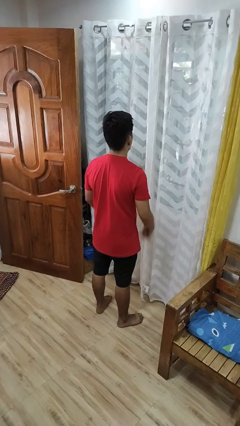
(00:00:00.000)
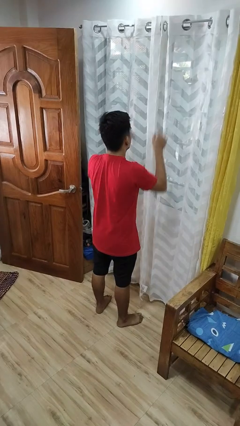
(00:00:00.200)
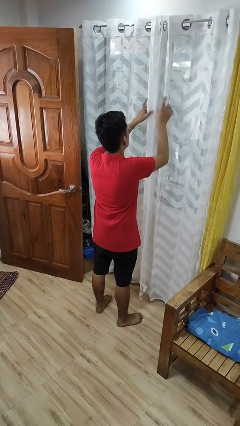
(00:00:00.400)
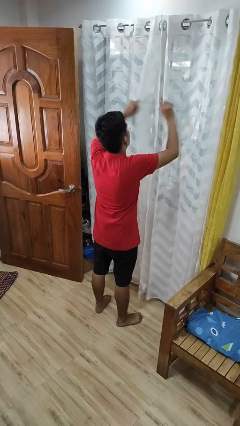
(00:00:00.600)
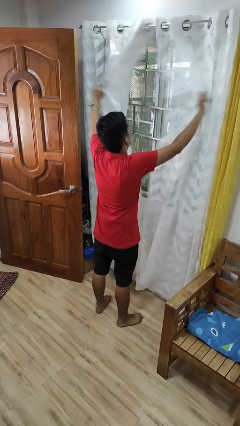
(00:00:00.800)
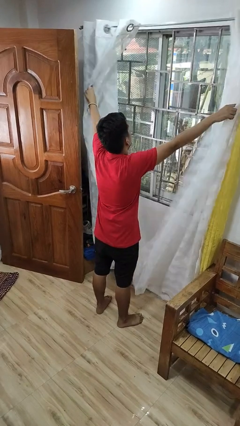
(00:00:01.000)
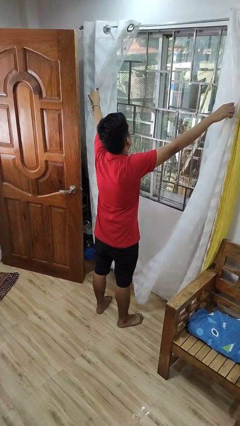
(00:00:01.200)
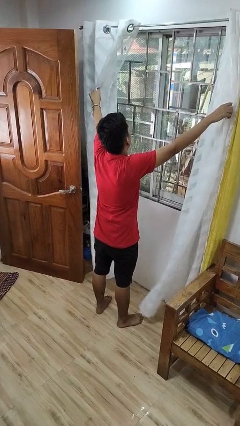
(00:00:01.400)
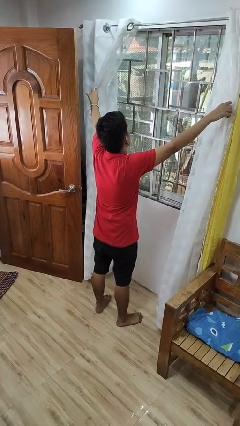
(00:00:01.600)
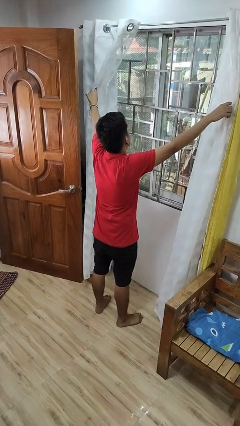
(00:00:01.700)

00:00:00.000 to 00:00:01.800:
person opens curtains

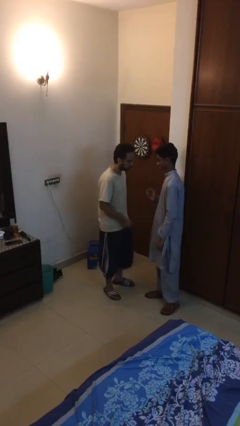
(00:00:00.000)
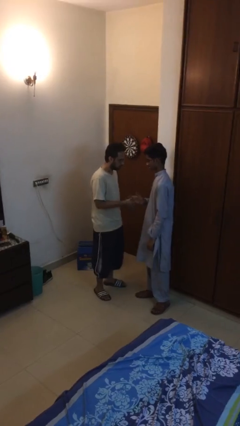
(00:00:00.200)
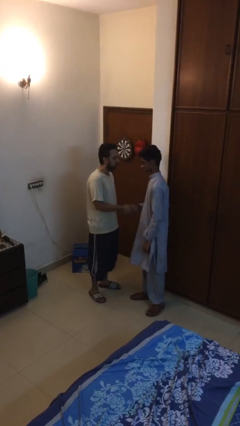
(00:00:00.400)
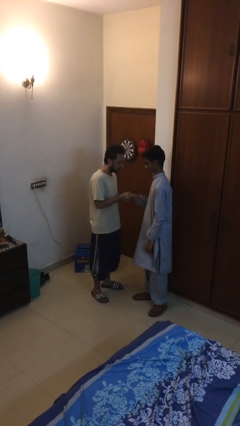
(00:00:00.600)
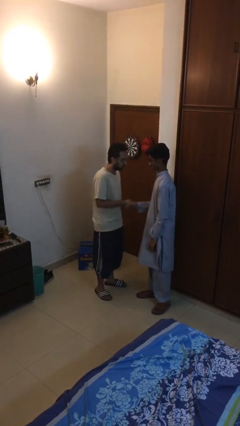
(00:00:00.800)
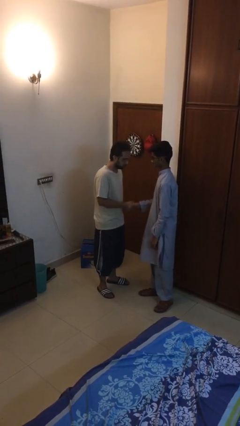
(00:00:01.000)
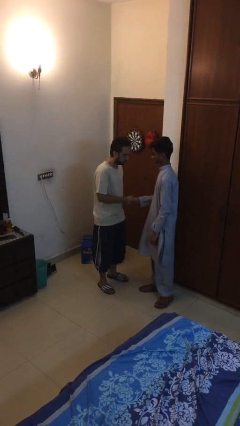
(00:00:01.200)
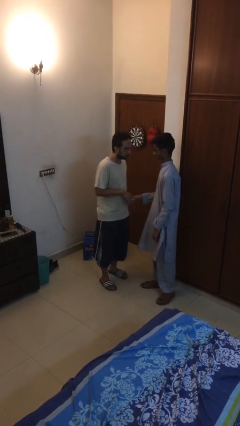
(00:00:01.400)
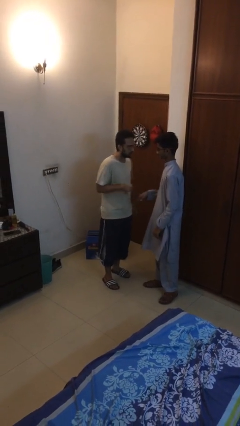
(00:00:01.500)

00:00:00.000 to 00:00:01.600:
person shakes hand

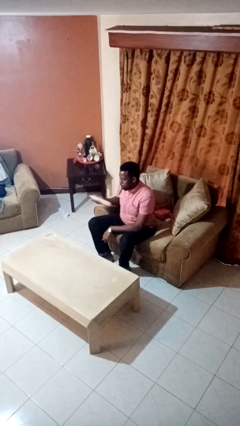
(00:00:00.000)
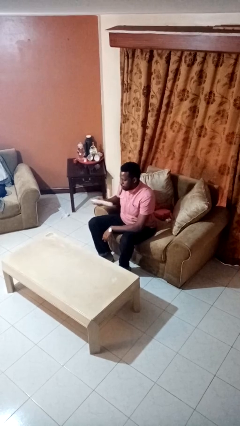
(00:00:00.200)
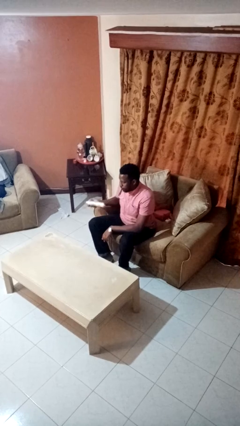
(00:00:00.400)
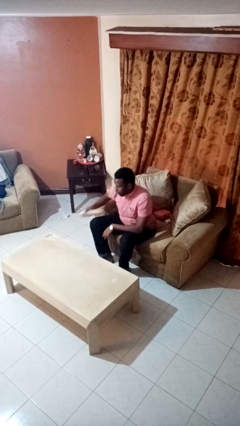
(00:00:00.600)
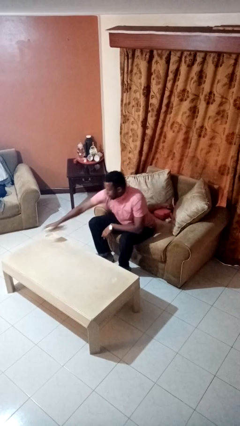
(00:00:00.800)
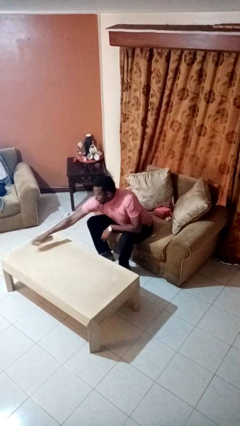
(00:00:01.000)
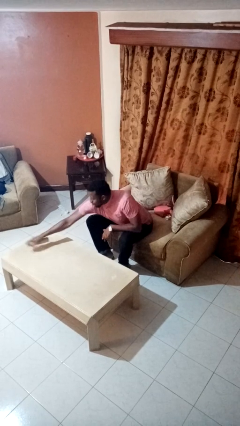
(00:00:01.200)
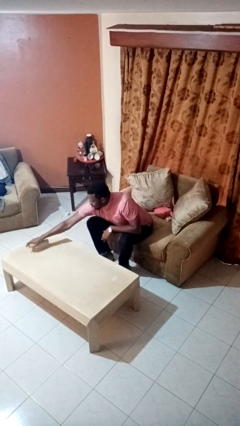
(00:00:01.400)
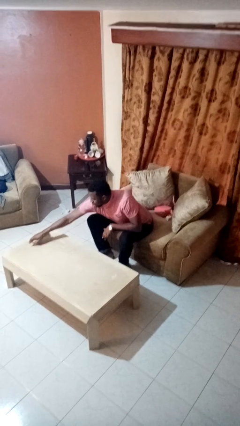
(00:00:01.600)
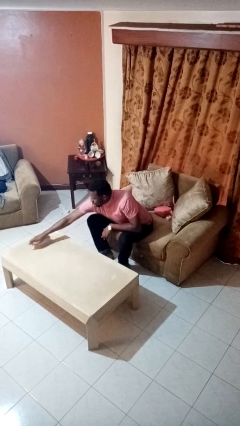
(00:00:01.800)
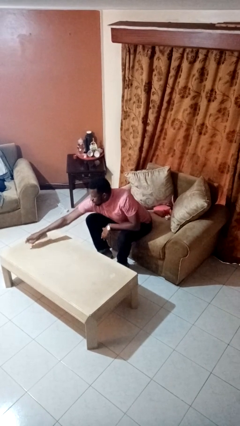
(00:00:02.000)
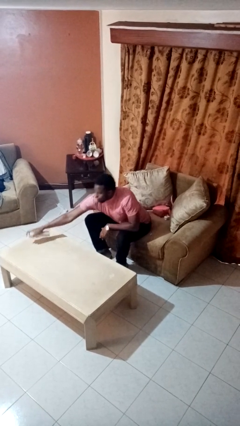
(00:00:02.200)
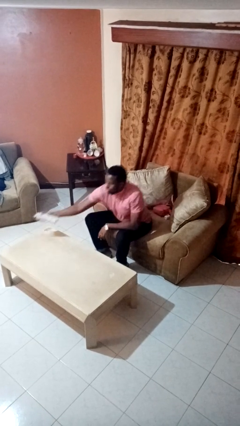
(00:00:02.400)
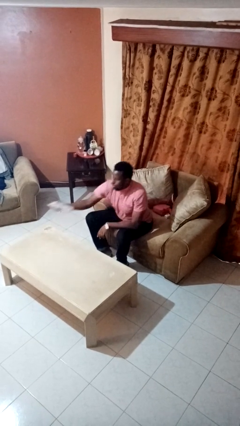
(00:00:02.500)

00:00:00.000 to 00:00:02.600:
person sprays from bottle

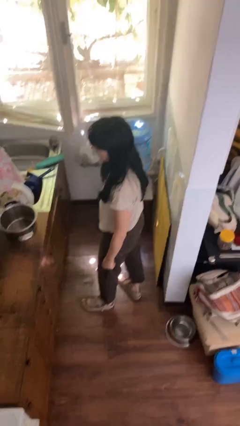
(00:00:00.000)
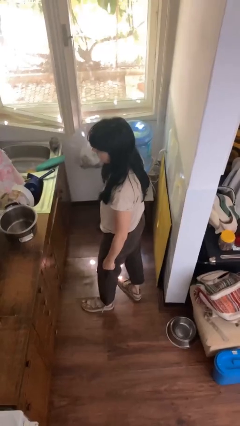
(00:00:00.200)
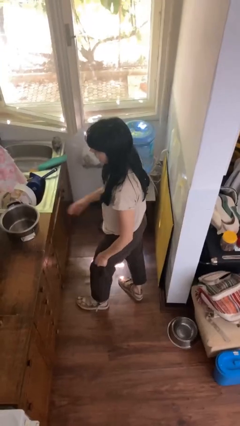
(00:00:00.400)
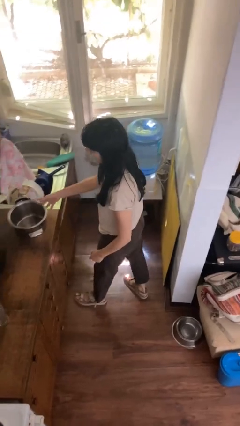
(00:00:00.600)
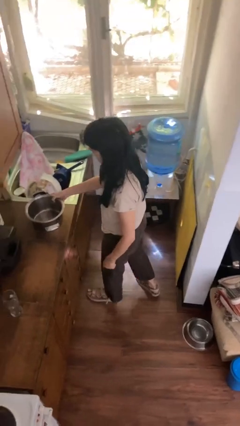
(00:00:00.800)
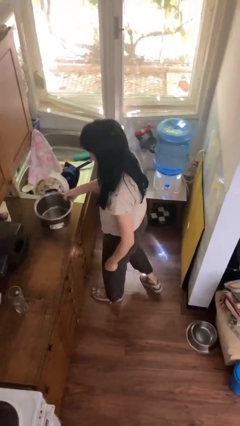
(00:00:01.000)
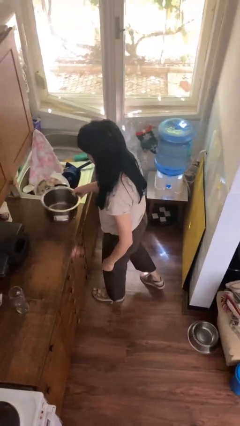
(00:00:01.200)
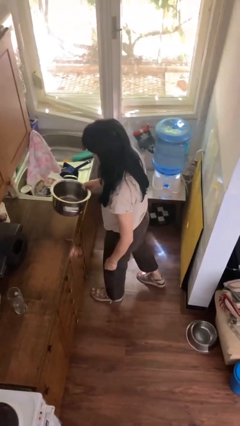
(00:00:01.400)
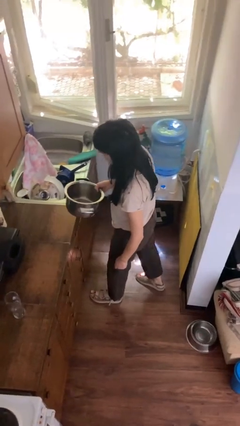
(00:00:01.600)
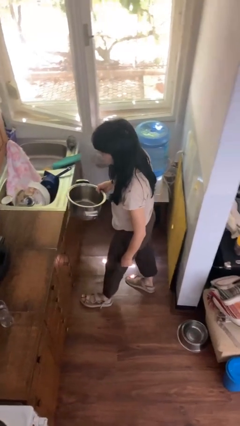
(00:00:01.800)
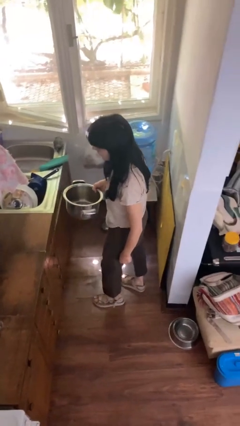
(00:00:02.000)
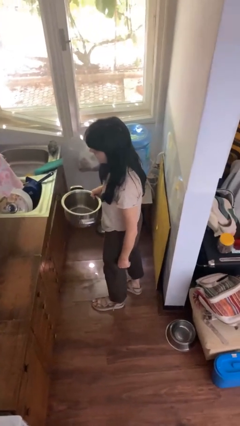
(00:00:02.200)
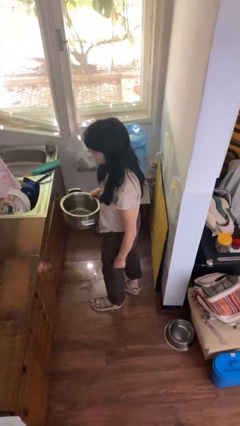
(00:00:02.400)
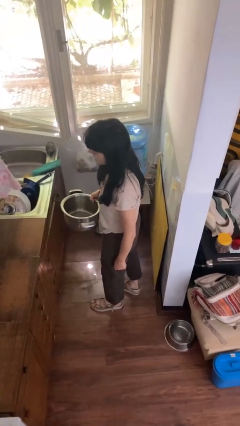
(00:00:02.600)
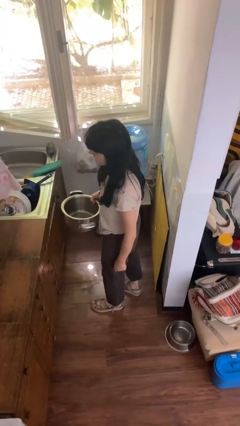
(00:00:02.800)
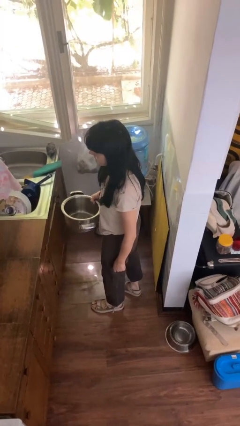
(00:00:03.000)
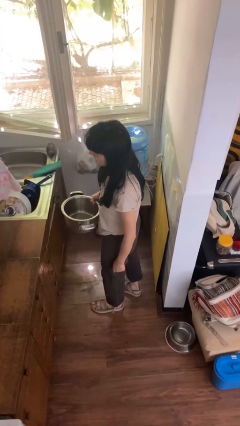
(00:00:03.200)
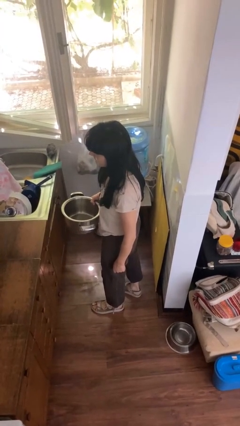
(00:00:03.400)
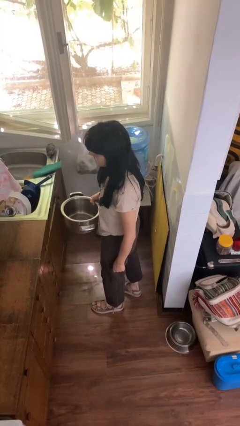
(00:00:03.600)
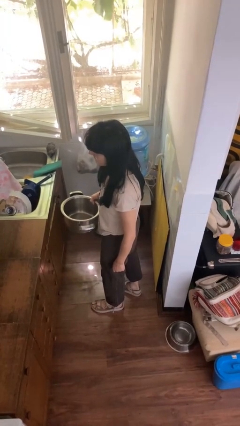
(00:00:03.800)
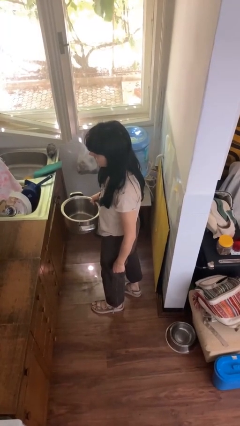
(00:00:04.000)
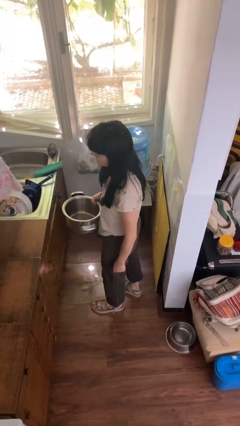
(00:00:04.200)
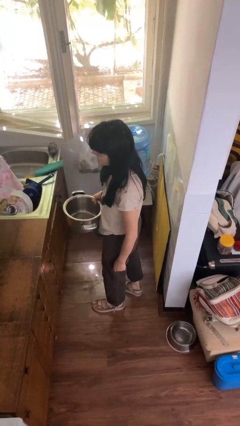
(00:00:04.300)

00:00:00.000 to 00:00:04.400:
person picks up object from countertop

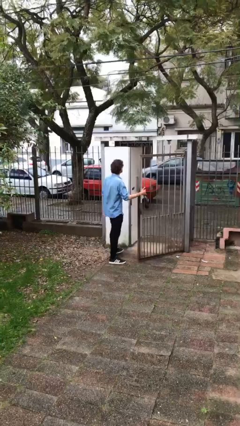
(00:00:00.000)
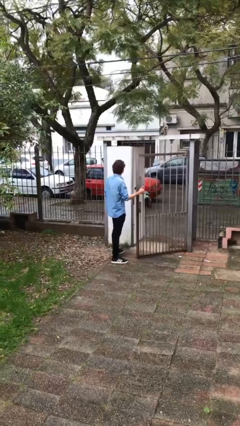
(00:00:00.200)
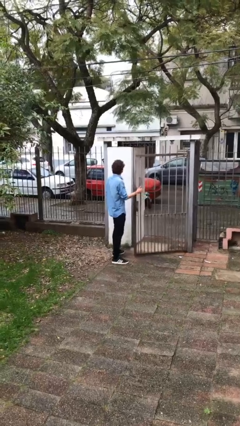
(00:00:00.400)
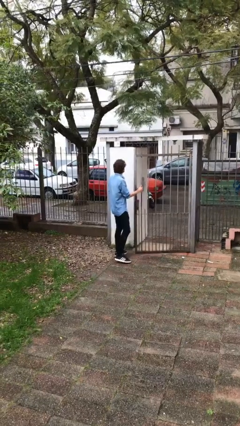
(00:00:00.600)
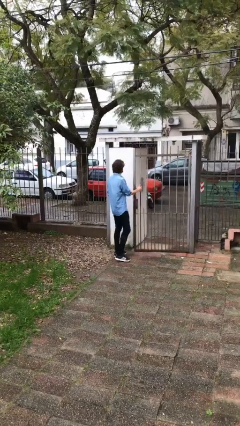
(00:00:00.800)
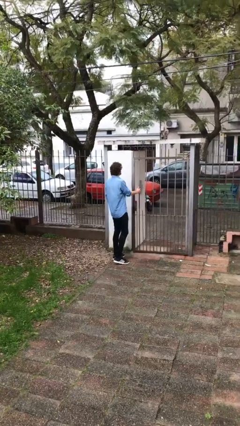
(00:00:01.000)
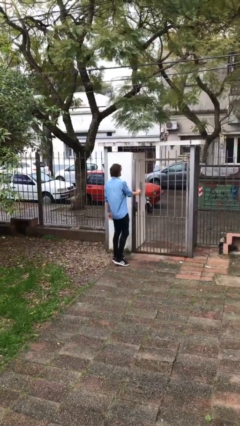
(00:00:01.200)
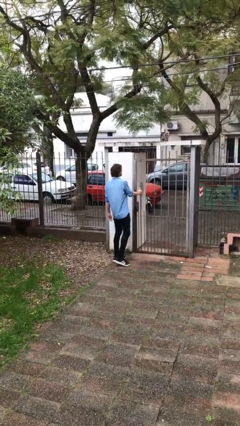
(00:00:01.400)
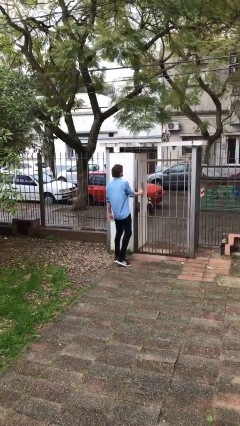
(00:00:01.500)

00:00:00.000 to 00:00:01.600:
person closes facility door

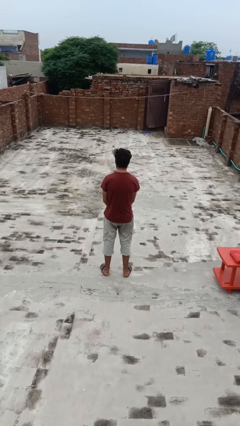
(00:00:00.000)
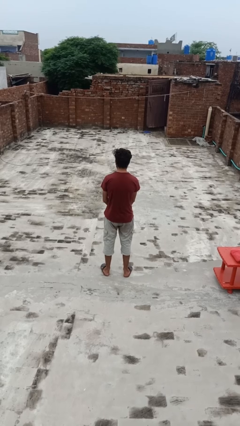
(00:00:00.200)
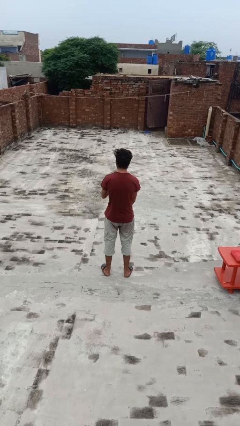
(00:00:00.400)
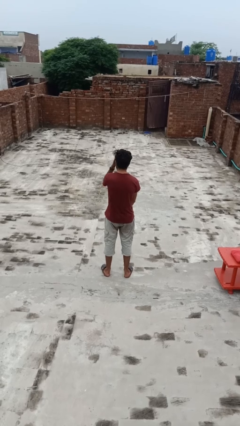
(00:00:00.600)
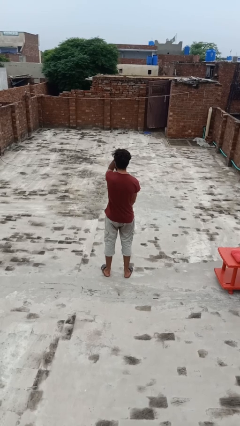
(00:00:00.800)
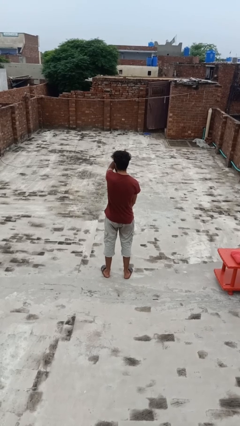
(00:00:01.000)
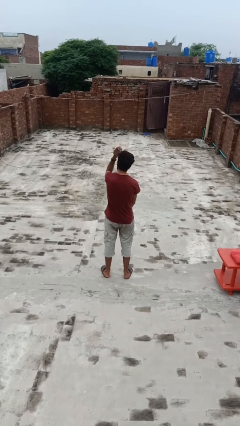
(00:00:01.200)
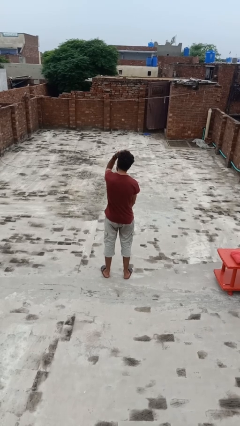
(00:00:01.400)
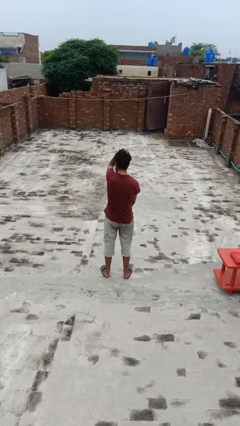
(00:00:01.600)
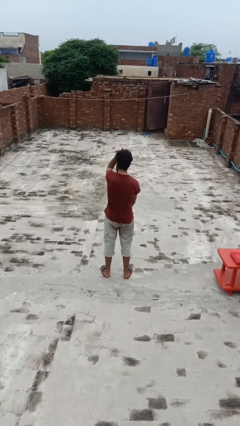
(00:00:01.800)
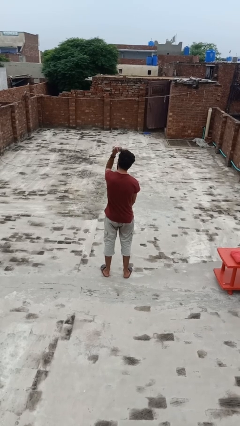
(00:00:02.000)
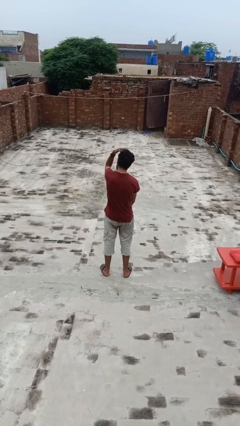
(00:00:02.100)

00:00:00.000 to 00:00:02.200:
person strokes hair

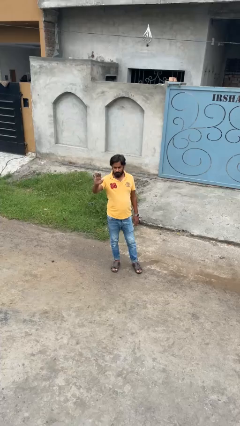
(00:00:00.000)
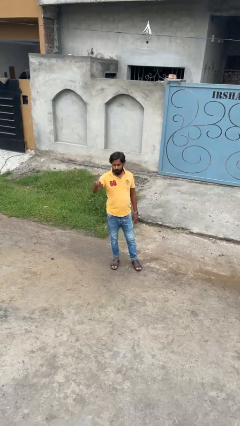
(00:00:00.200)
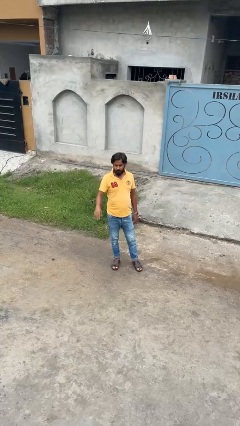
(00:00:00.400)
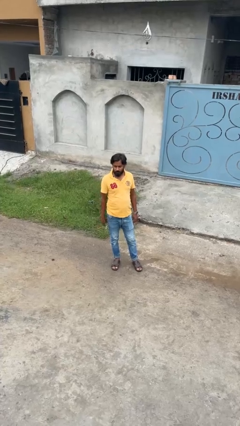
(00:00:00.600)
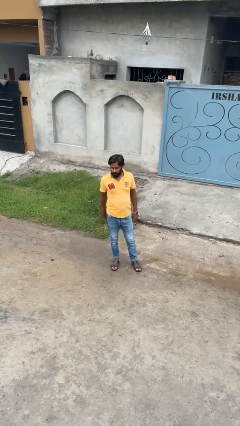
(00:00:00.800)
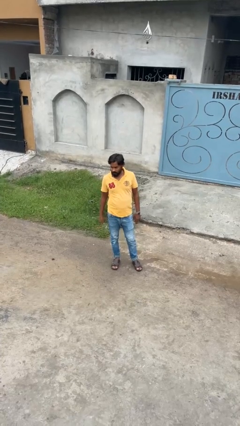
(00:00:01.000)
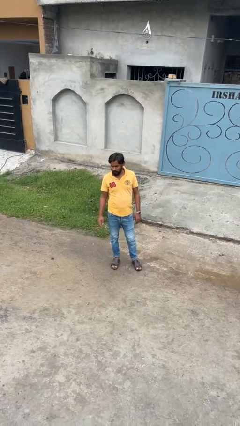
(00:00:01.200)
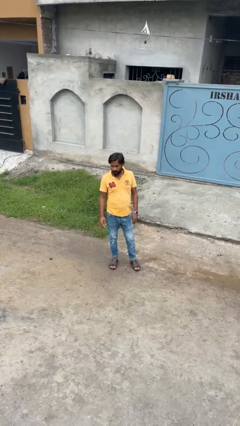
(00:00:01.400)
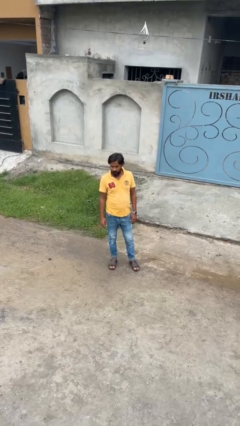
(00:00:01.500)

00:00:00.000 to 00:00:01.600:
person gestures lower hand

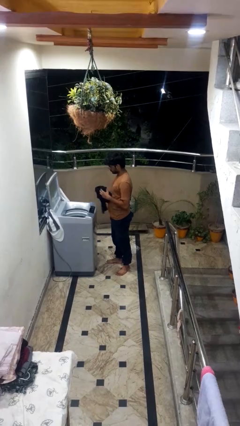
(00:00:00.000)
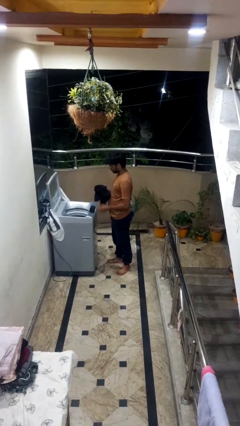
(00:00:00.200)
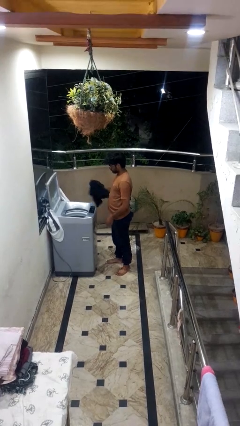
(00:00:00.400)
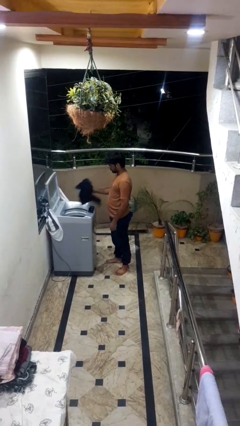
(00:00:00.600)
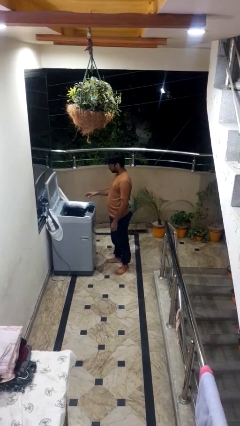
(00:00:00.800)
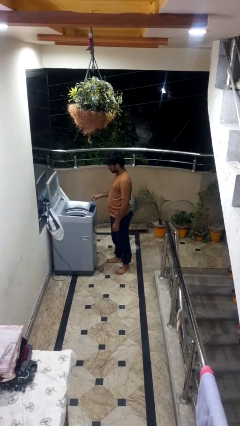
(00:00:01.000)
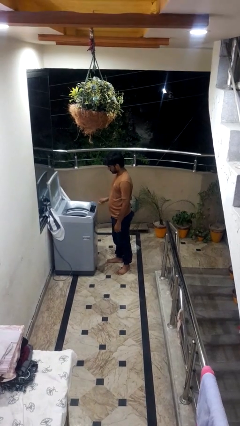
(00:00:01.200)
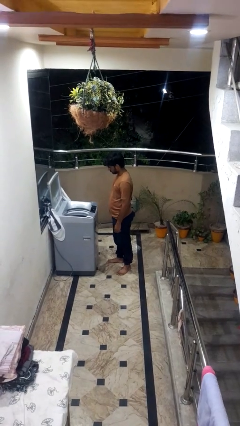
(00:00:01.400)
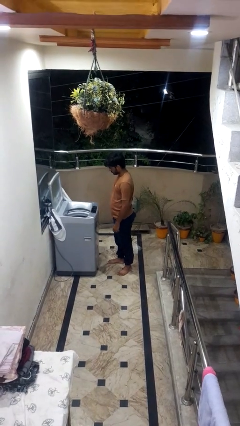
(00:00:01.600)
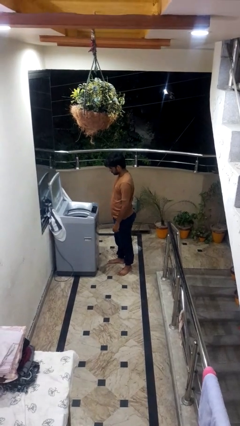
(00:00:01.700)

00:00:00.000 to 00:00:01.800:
person loads clotheswasher
